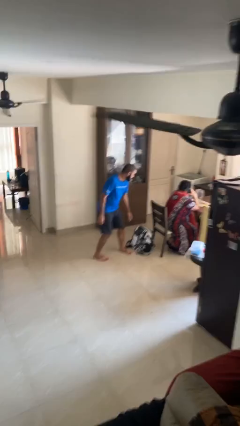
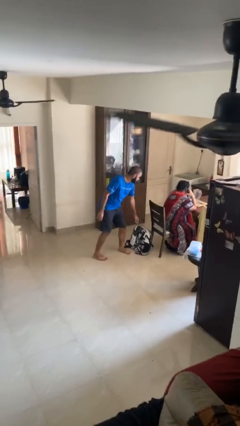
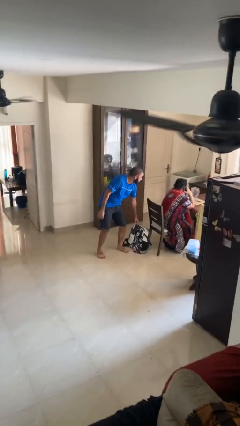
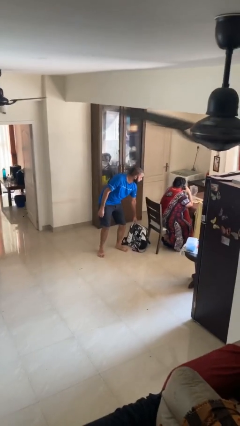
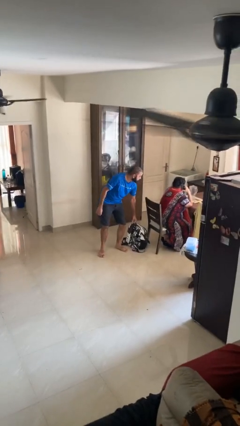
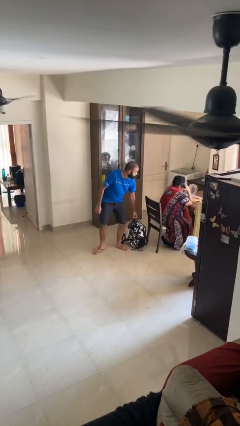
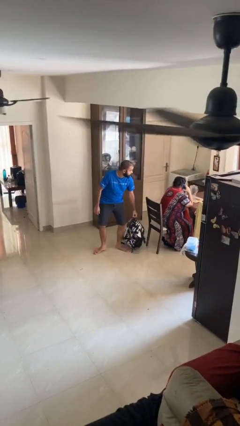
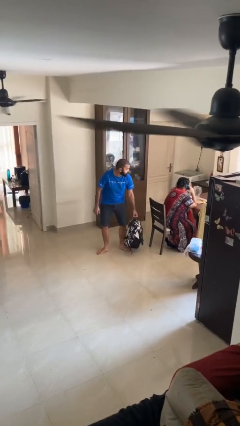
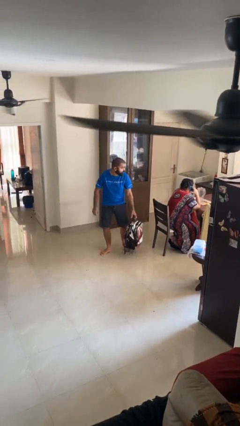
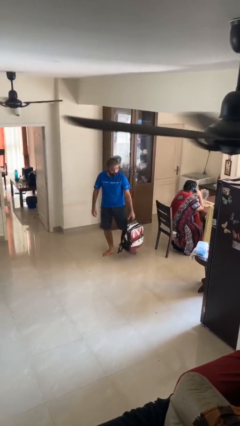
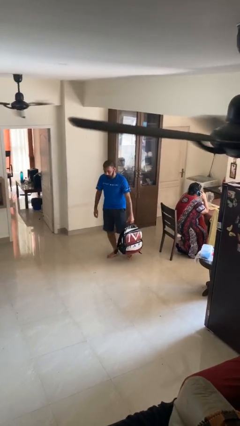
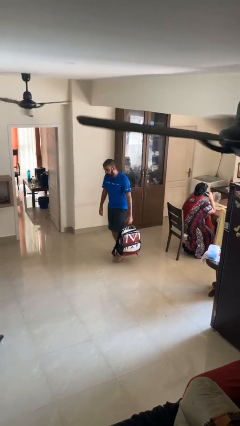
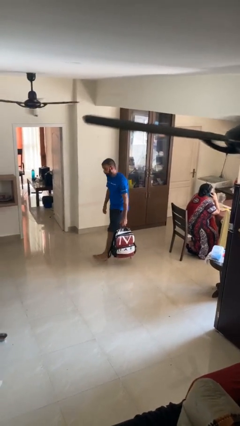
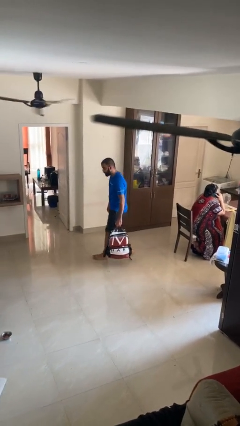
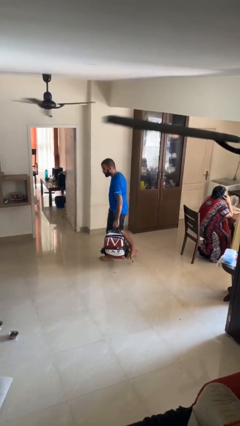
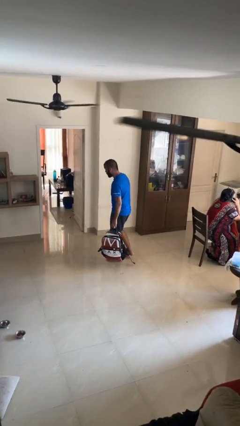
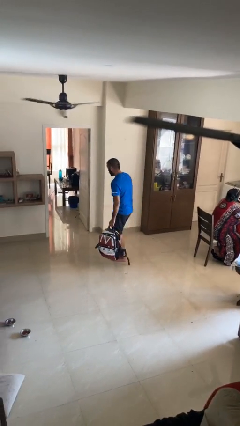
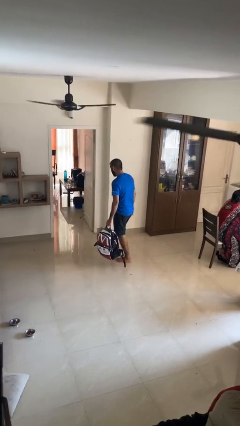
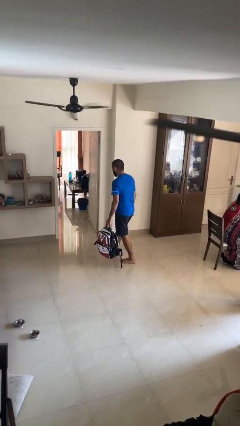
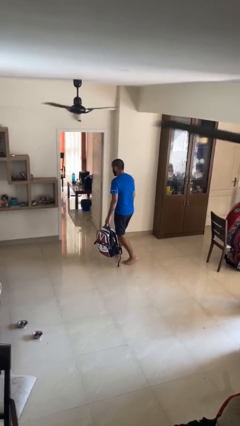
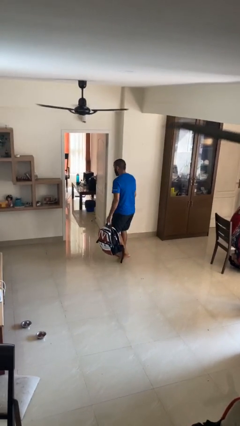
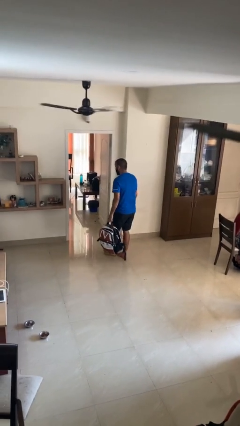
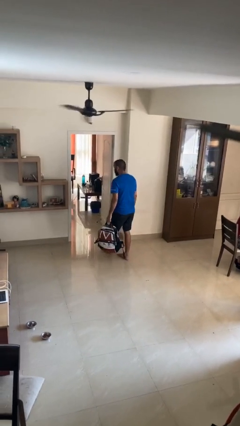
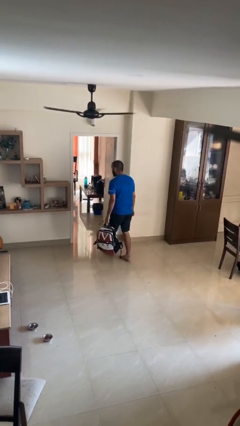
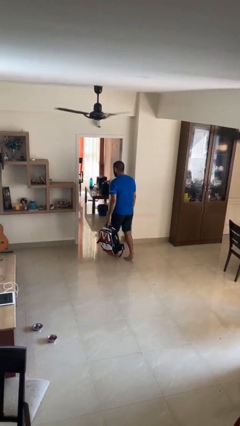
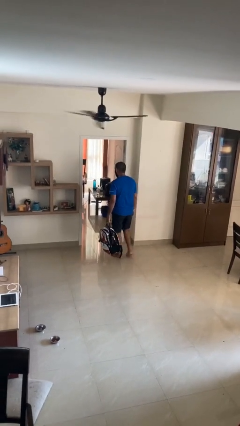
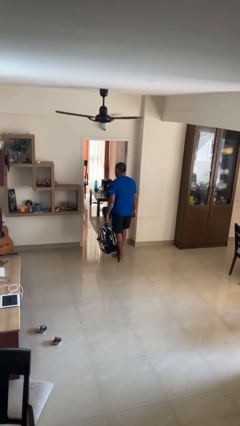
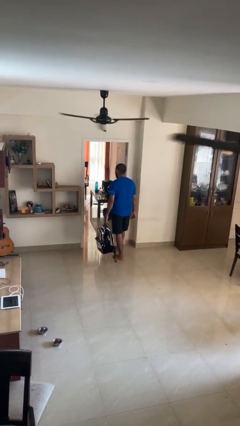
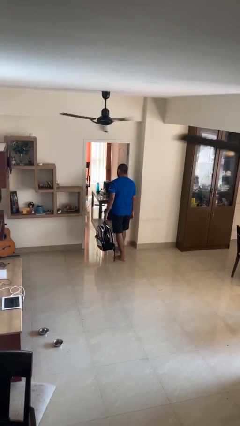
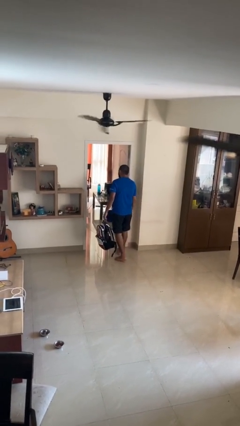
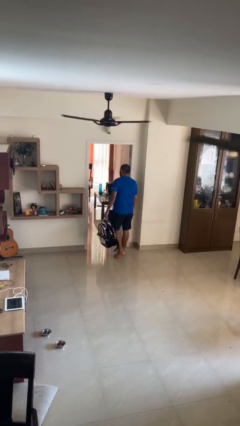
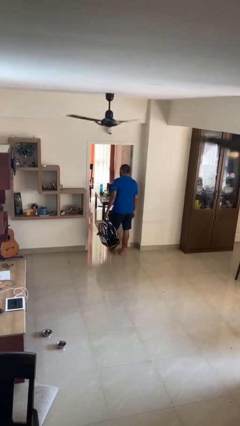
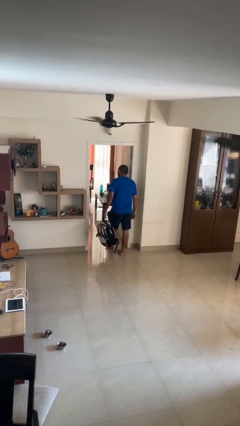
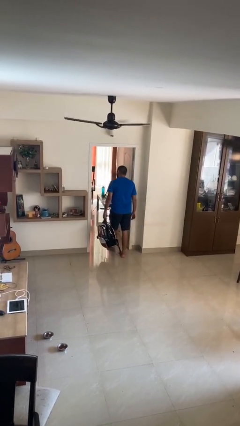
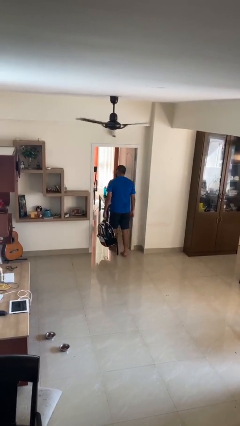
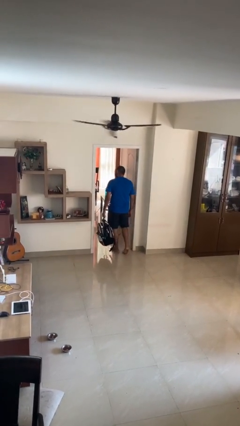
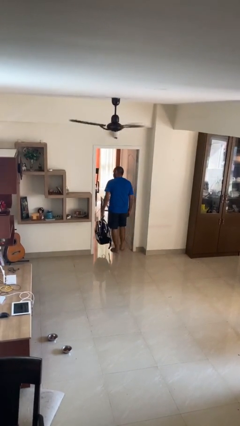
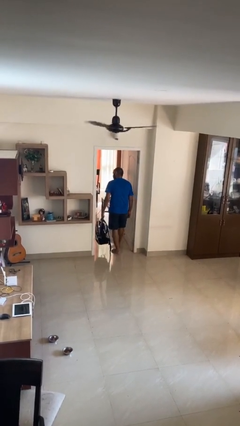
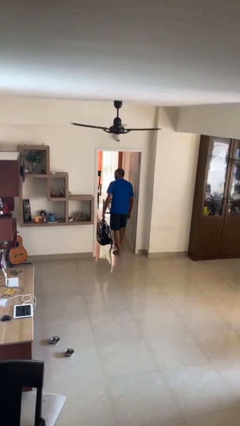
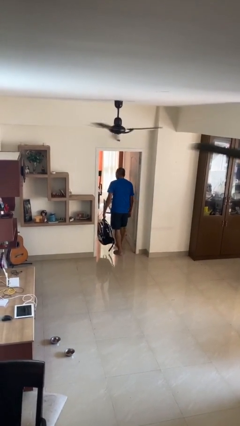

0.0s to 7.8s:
person steals object from person

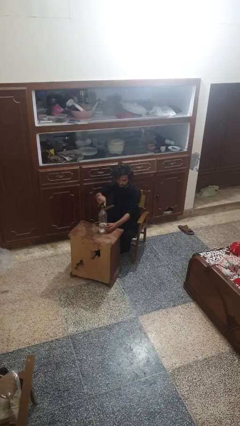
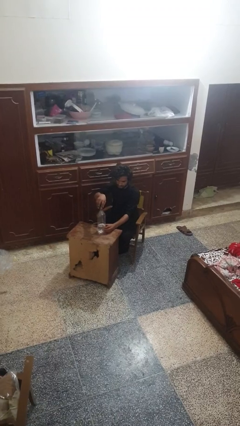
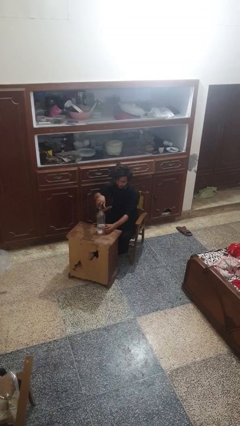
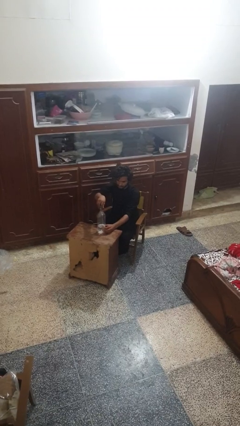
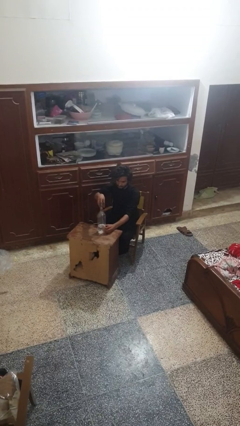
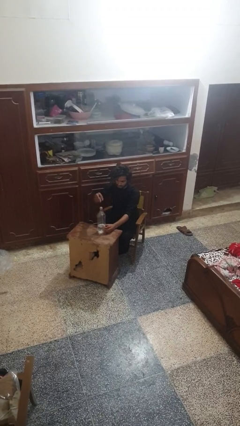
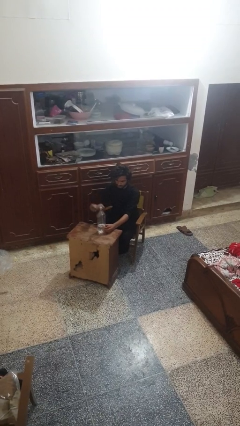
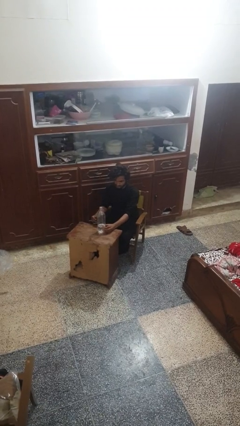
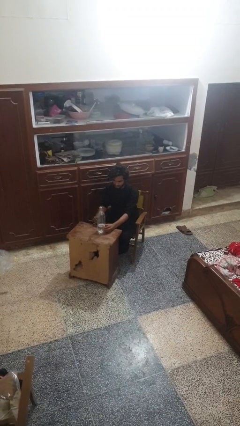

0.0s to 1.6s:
person unscrews lid from bottle

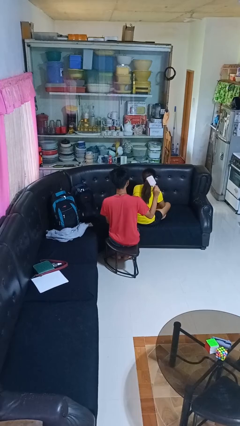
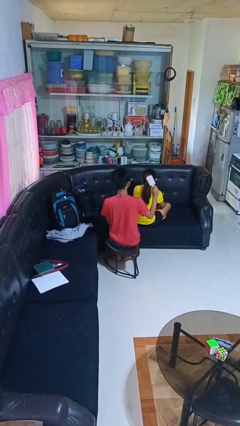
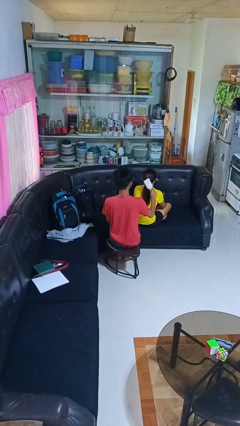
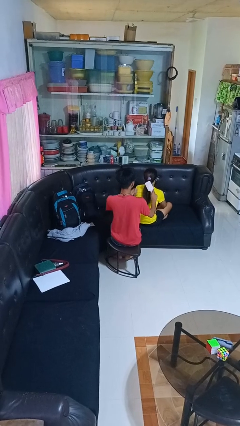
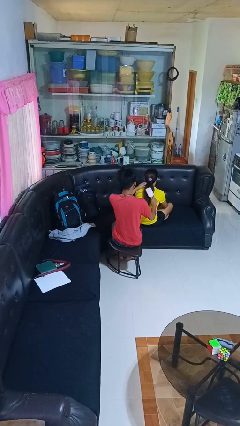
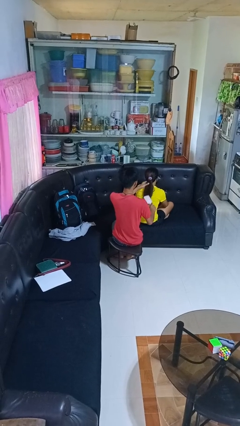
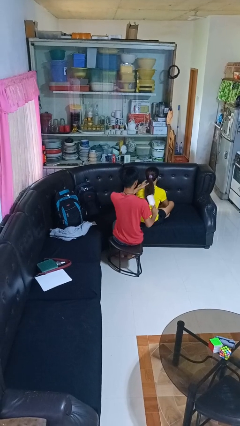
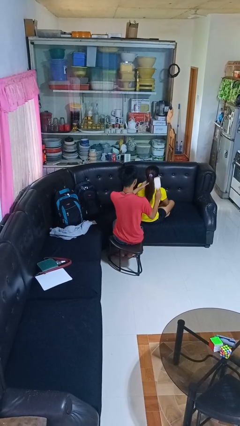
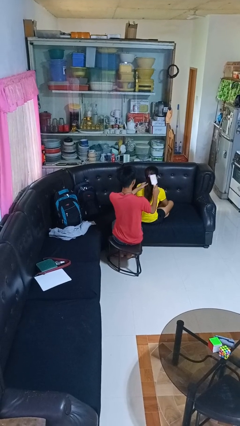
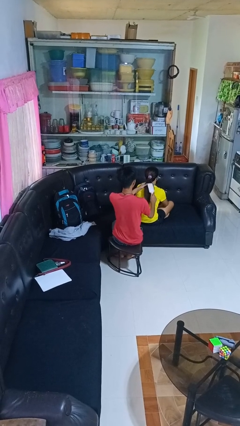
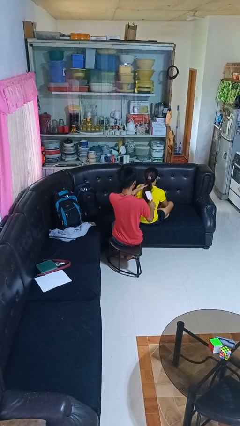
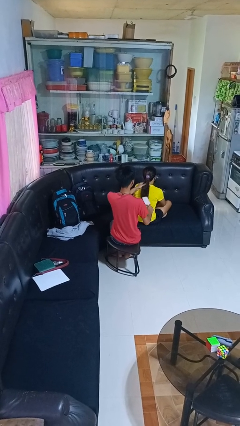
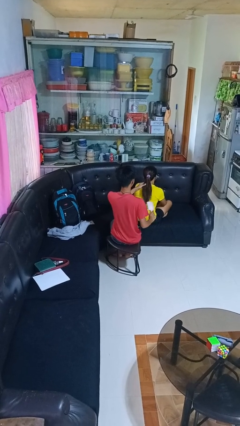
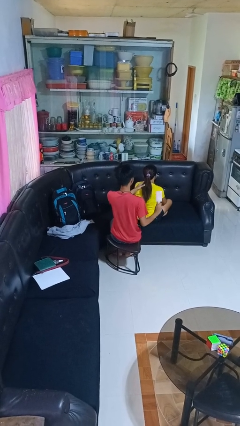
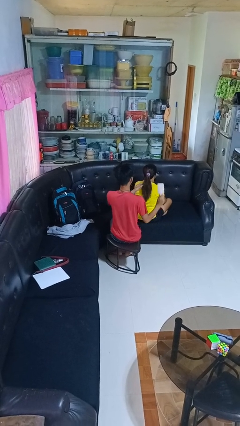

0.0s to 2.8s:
person brushes hair of person

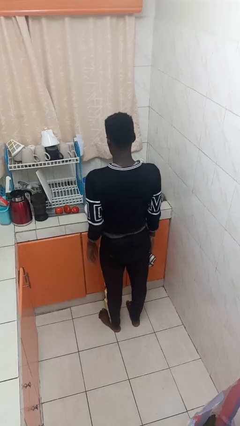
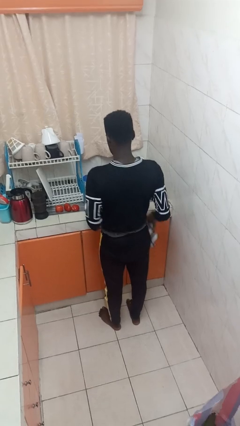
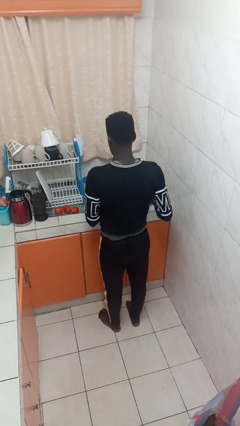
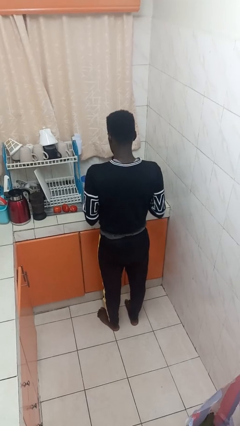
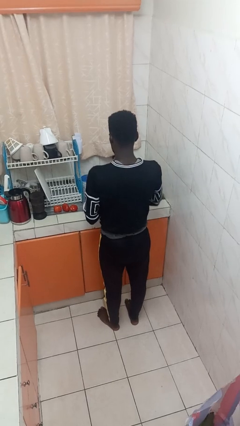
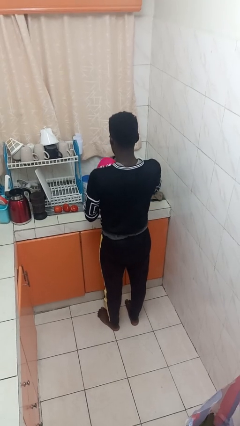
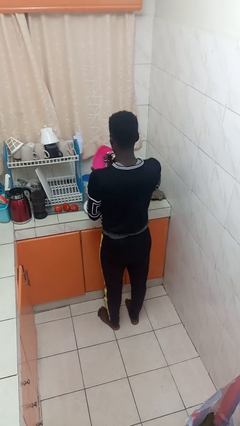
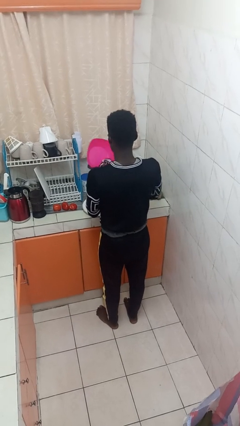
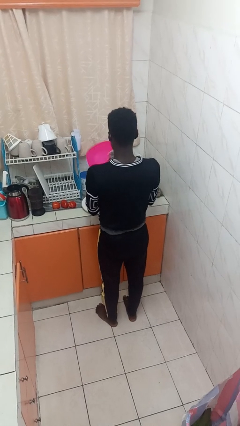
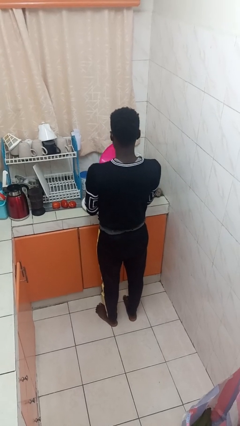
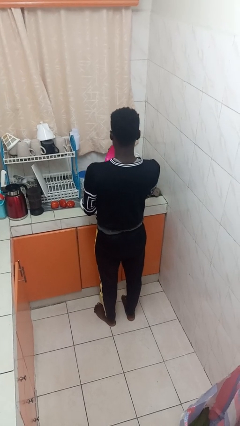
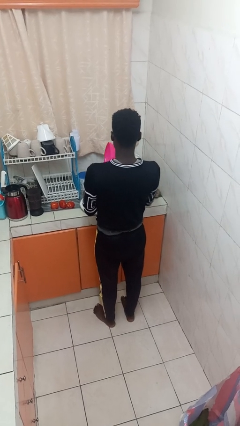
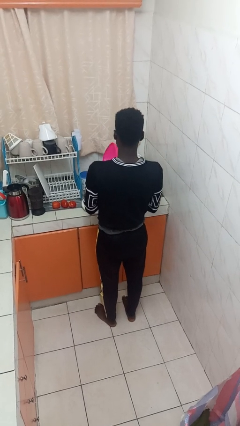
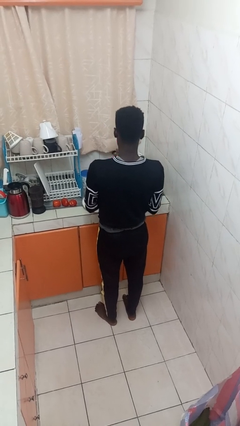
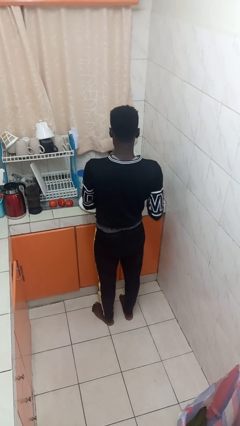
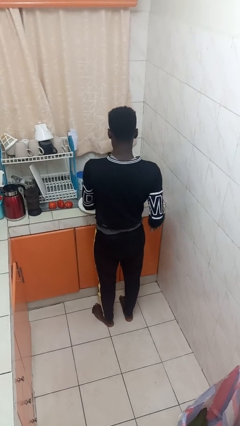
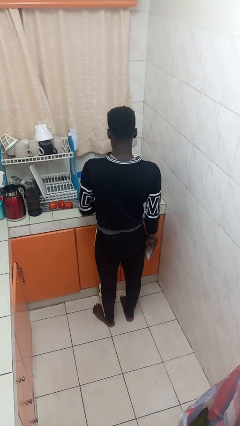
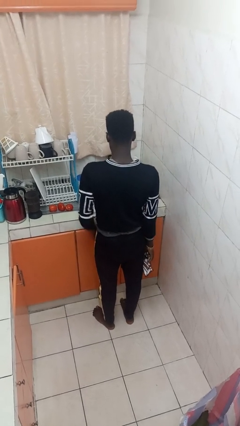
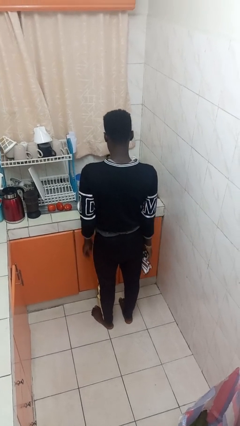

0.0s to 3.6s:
person dries dish

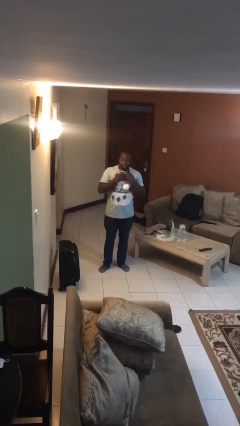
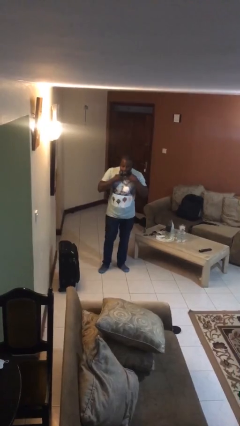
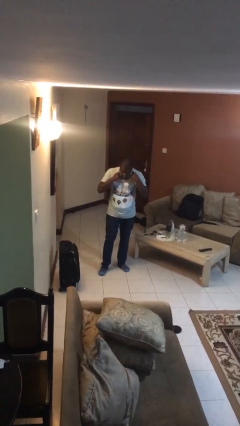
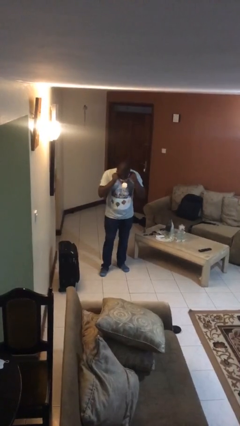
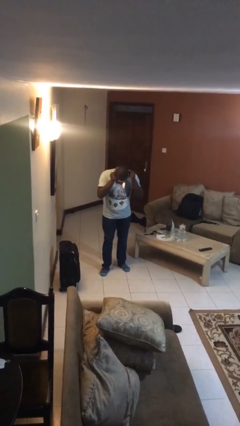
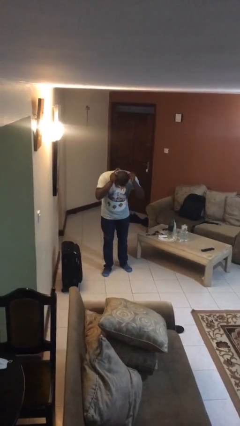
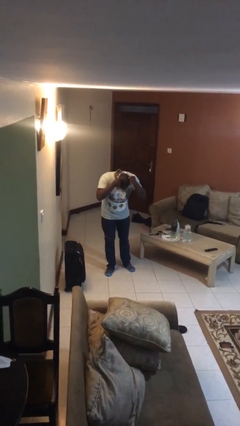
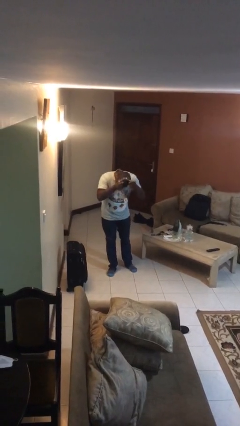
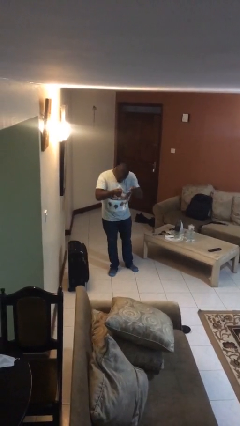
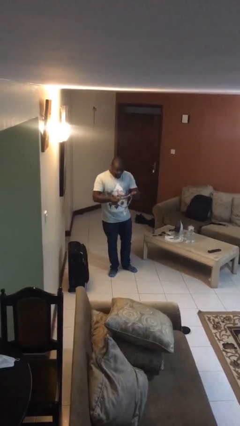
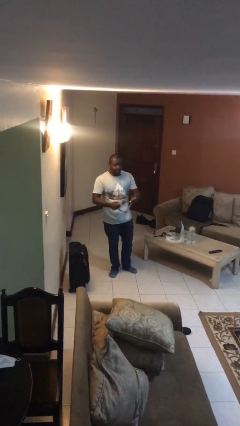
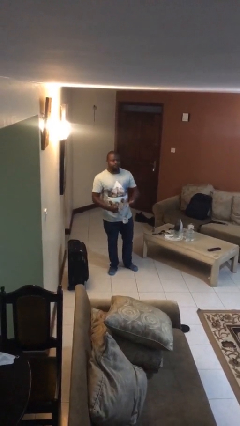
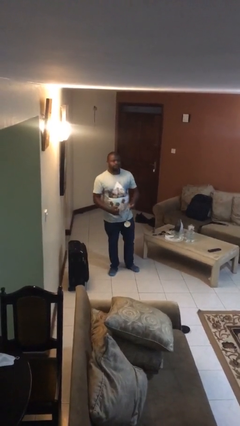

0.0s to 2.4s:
person takes off necklace
